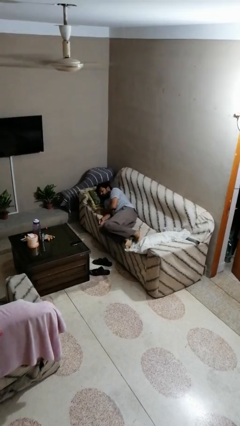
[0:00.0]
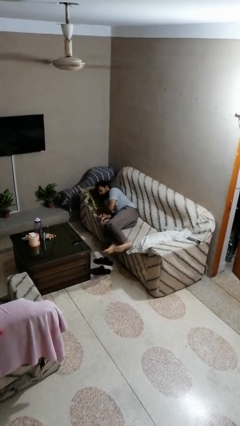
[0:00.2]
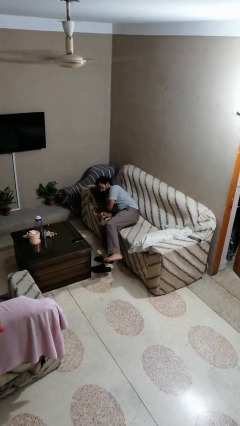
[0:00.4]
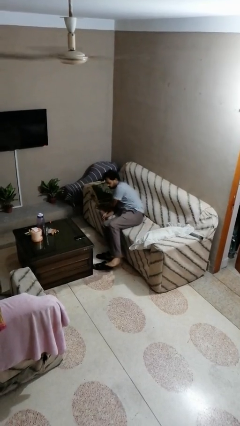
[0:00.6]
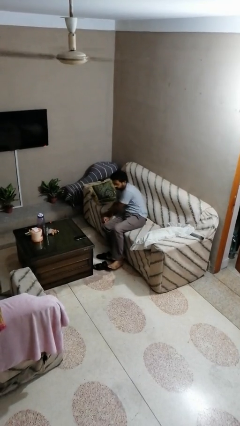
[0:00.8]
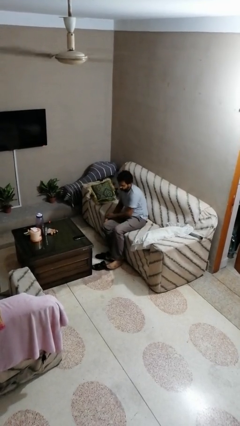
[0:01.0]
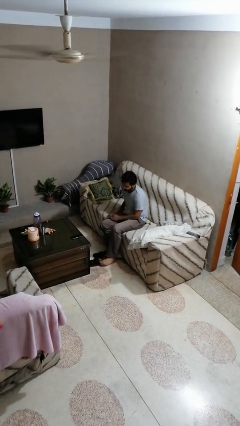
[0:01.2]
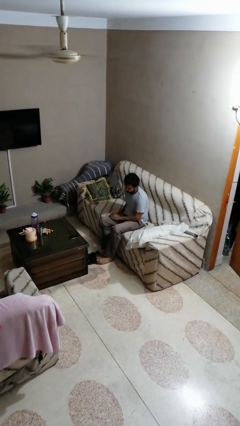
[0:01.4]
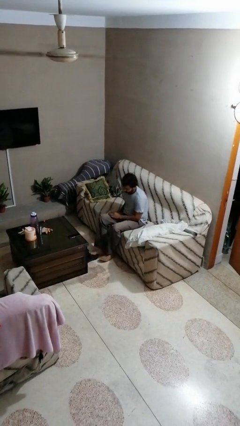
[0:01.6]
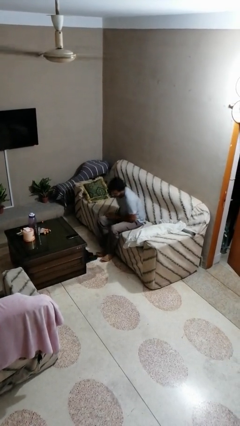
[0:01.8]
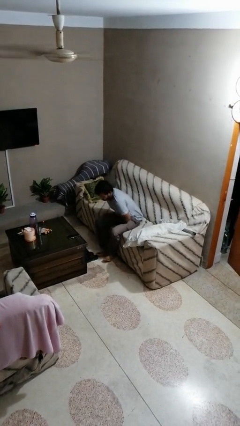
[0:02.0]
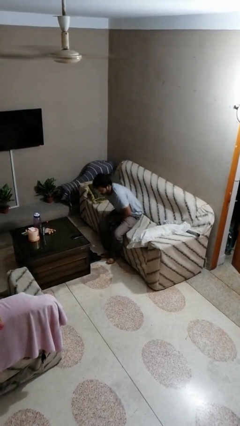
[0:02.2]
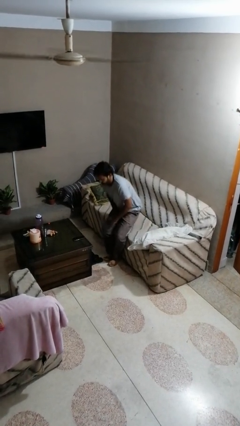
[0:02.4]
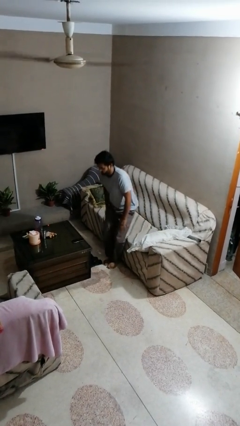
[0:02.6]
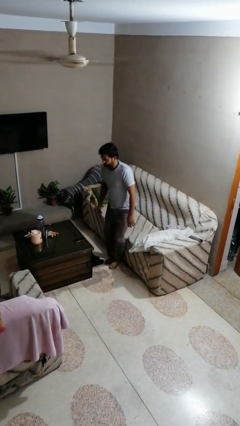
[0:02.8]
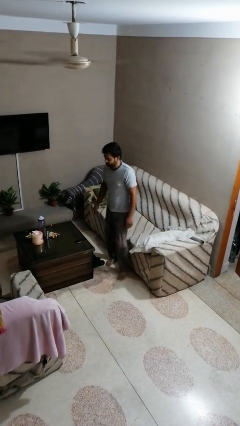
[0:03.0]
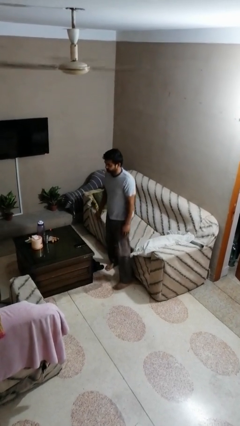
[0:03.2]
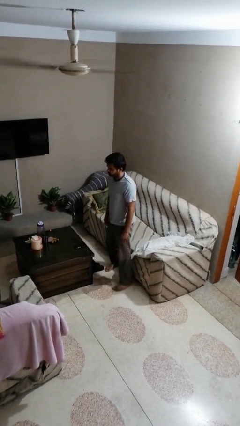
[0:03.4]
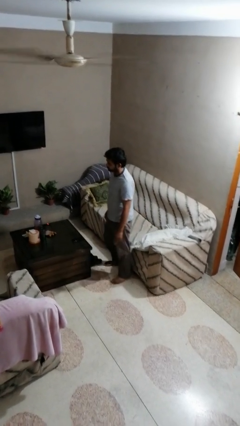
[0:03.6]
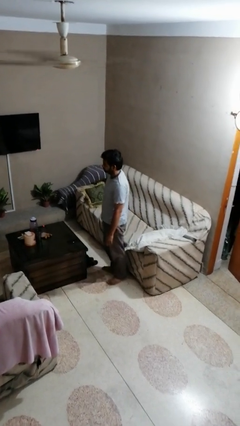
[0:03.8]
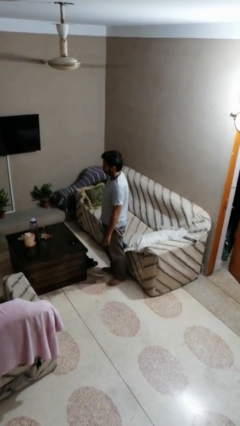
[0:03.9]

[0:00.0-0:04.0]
person stands up

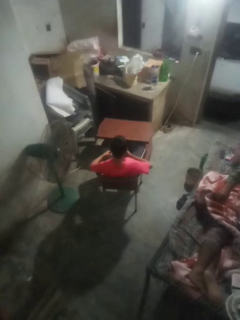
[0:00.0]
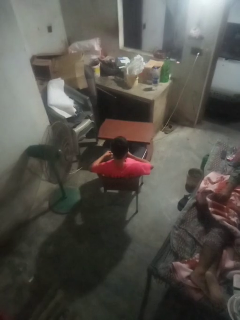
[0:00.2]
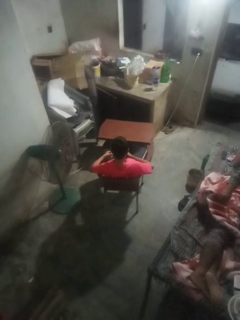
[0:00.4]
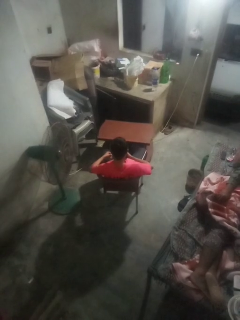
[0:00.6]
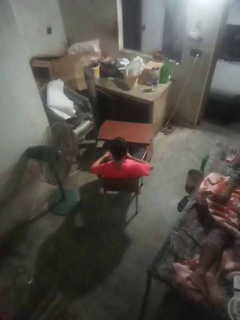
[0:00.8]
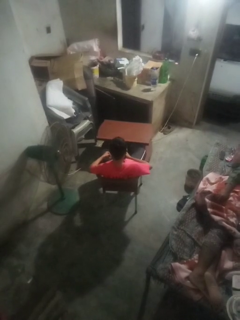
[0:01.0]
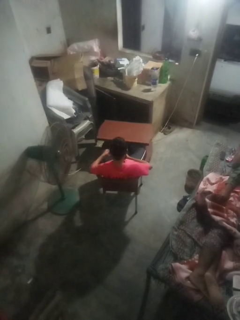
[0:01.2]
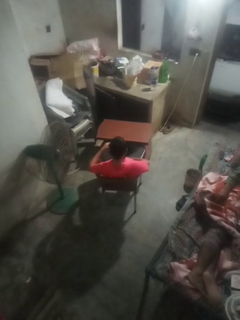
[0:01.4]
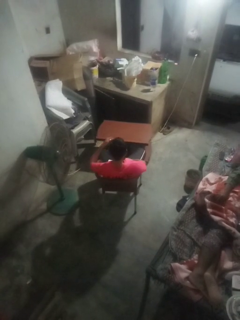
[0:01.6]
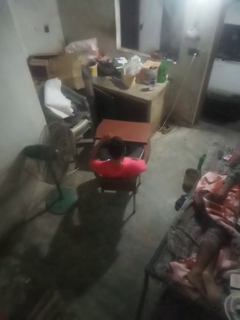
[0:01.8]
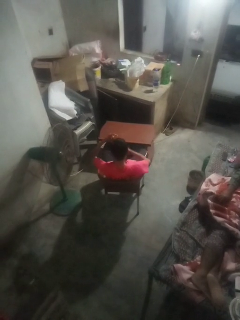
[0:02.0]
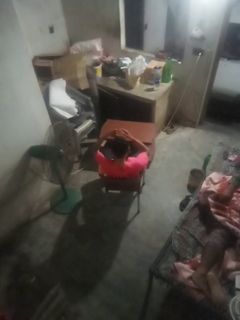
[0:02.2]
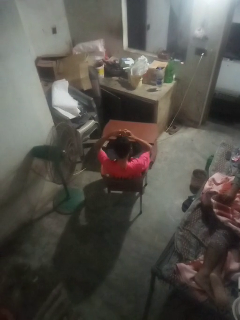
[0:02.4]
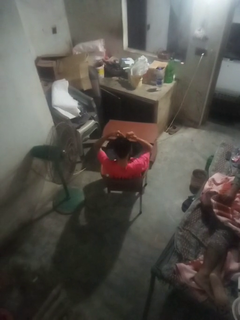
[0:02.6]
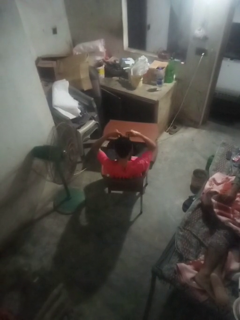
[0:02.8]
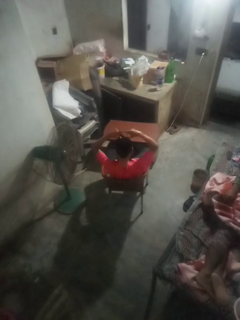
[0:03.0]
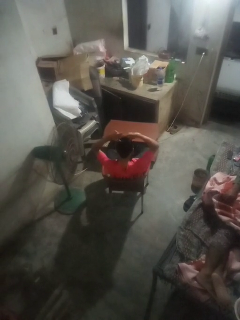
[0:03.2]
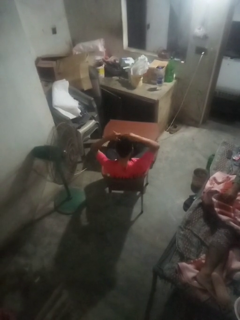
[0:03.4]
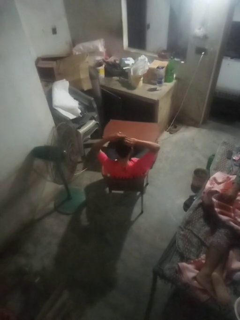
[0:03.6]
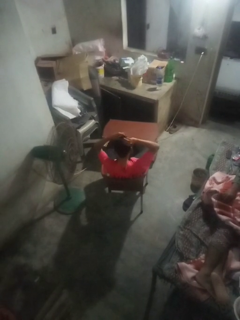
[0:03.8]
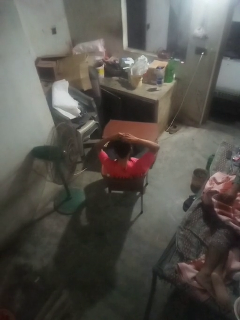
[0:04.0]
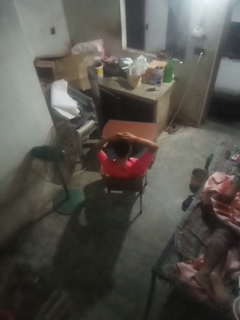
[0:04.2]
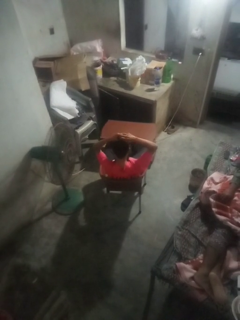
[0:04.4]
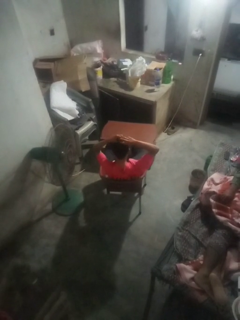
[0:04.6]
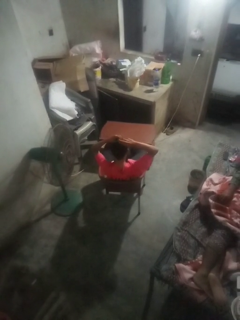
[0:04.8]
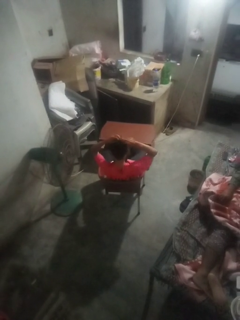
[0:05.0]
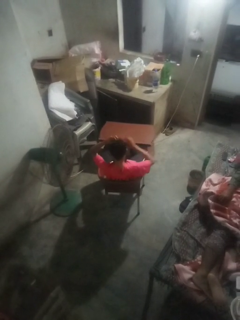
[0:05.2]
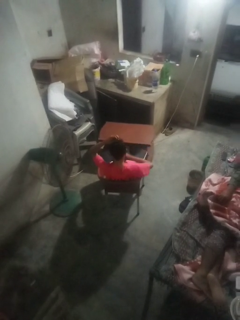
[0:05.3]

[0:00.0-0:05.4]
person puts hair in ponytail

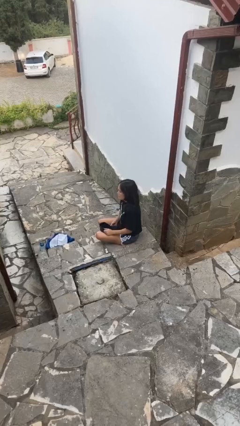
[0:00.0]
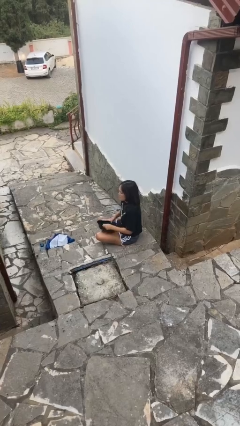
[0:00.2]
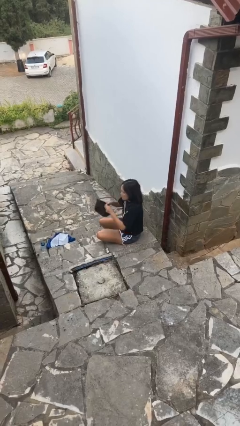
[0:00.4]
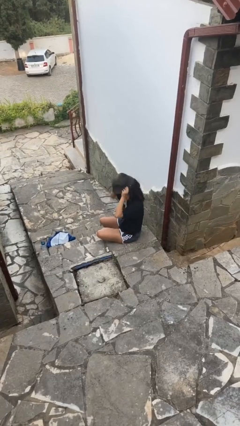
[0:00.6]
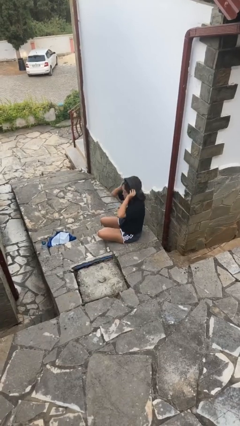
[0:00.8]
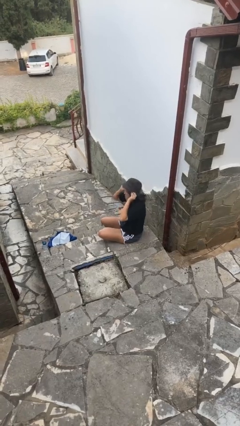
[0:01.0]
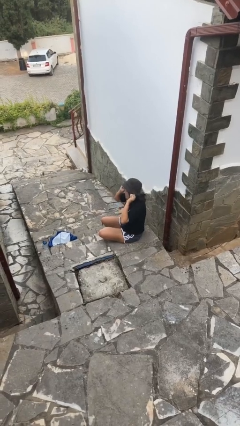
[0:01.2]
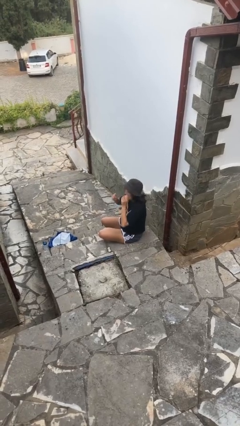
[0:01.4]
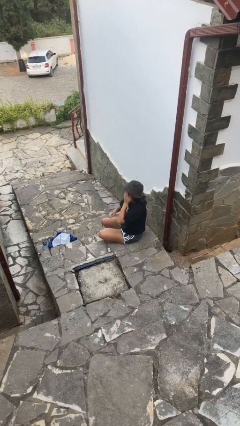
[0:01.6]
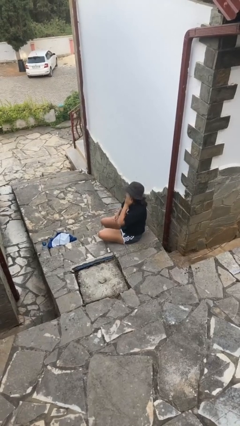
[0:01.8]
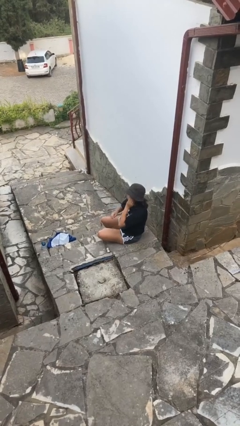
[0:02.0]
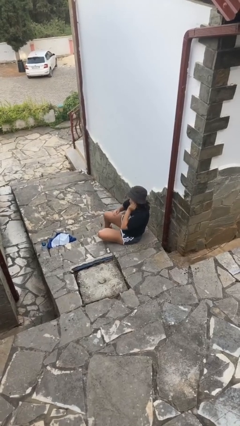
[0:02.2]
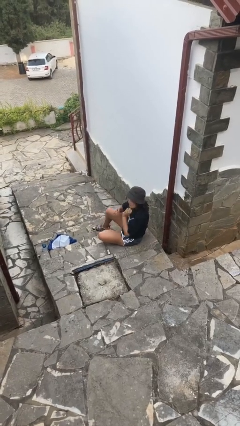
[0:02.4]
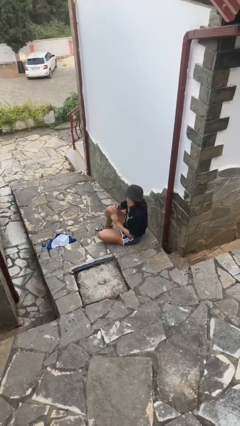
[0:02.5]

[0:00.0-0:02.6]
person puts on hat

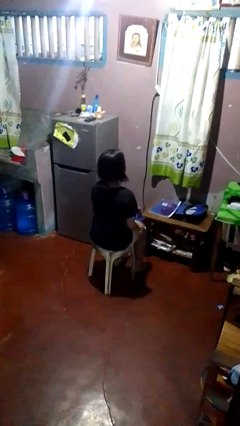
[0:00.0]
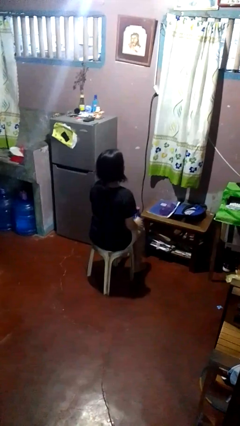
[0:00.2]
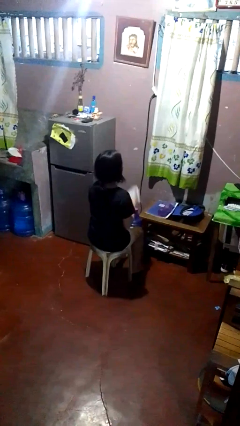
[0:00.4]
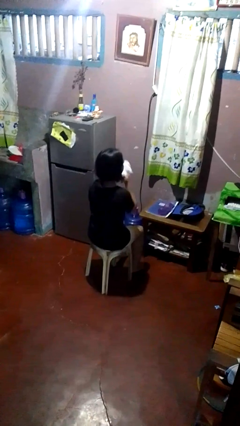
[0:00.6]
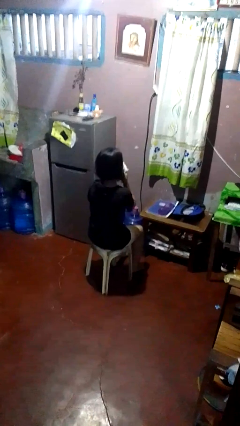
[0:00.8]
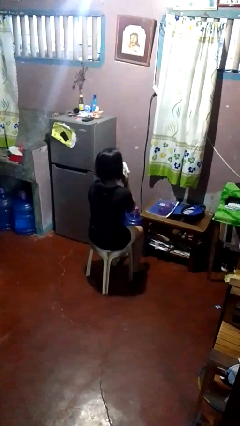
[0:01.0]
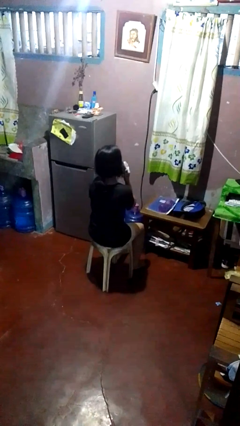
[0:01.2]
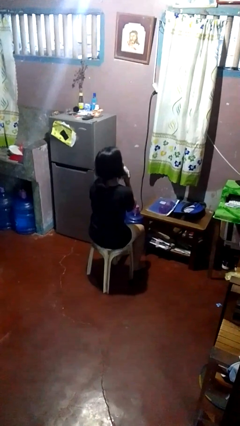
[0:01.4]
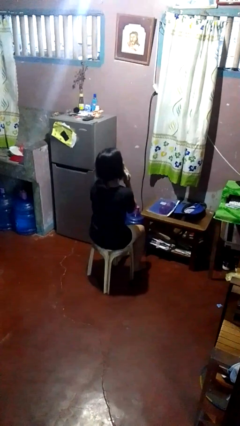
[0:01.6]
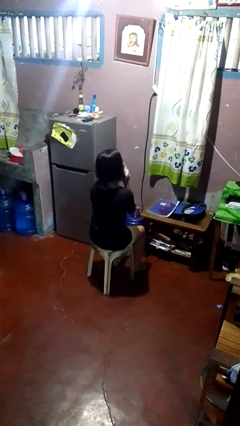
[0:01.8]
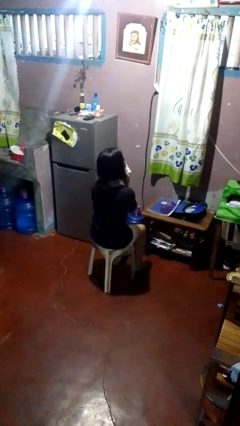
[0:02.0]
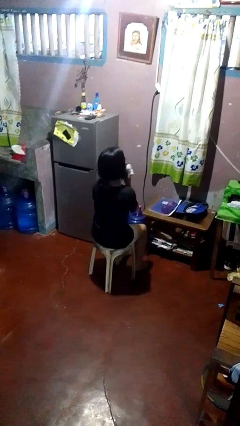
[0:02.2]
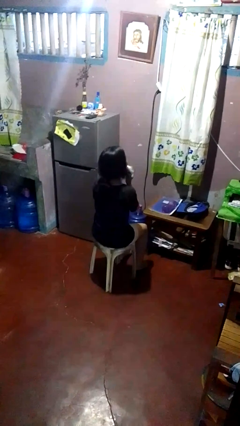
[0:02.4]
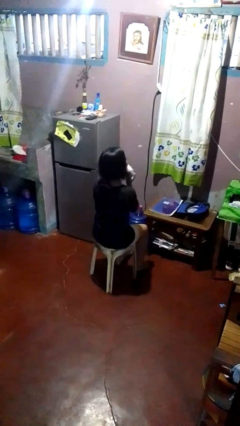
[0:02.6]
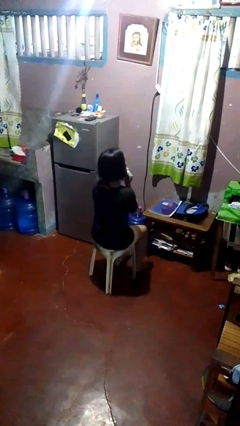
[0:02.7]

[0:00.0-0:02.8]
person wipes mouth with napkin

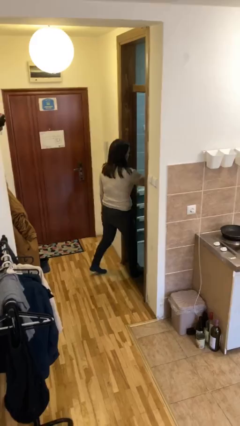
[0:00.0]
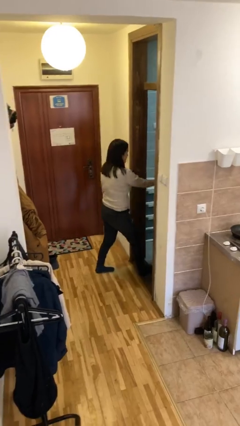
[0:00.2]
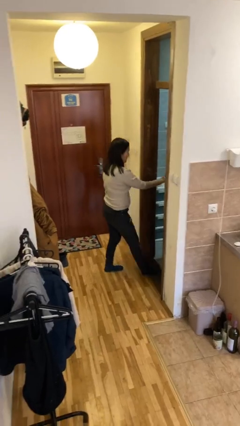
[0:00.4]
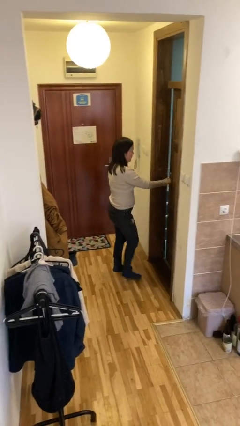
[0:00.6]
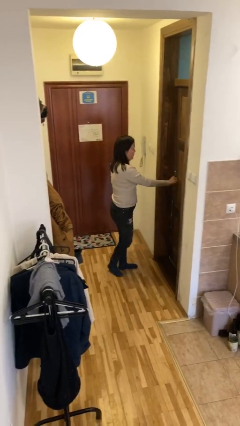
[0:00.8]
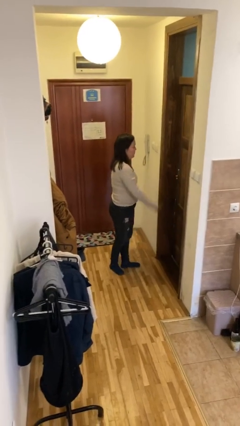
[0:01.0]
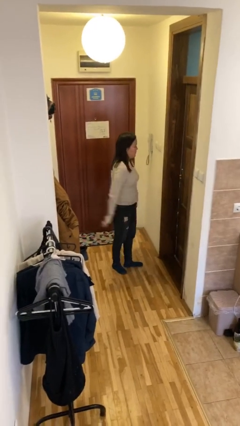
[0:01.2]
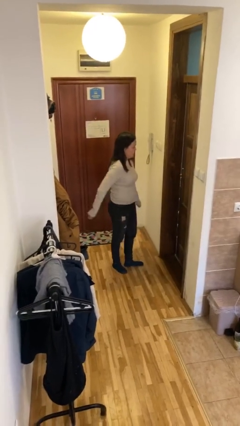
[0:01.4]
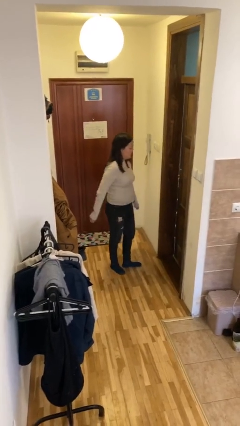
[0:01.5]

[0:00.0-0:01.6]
person closes facility door

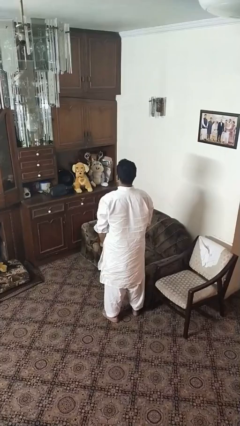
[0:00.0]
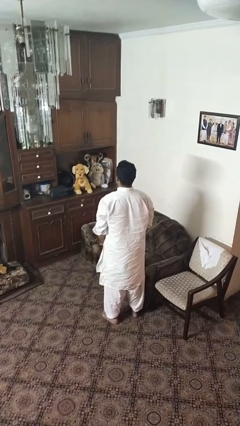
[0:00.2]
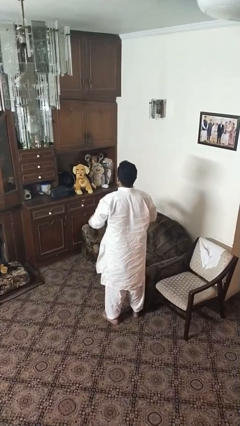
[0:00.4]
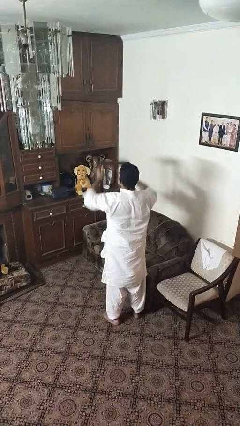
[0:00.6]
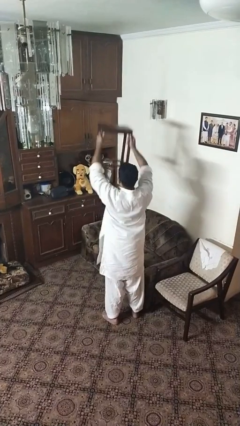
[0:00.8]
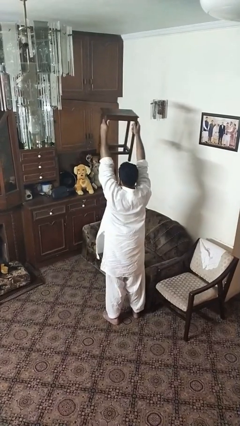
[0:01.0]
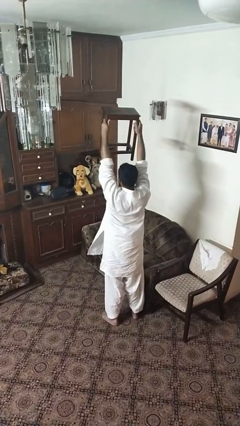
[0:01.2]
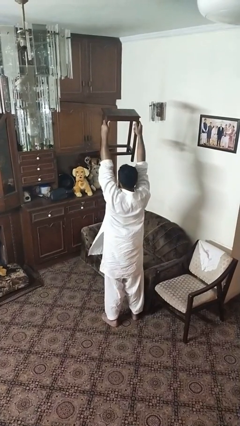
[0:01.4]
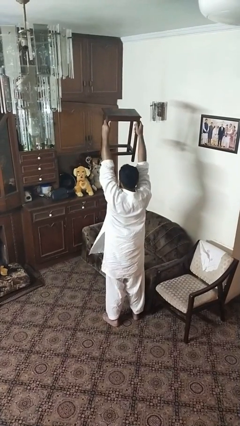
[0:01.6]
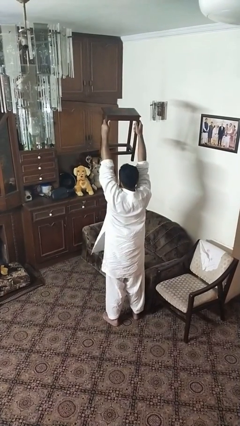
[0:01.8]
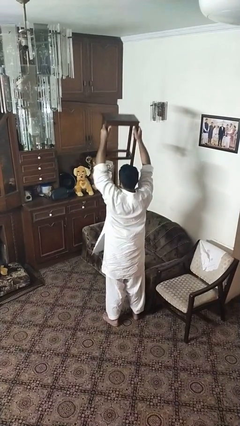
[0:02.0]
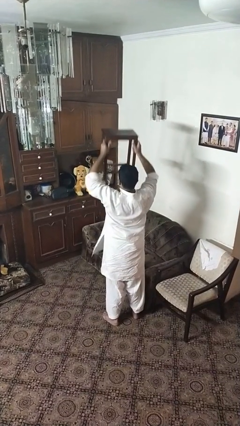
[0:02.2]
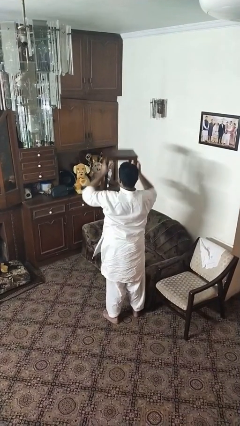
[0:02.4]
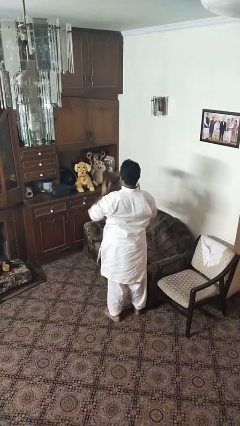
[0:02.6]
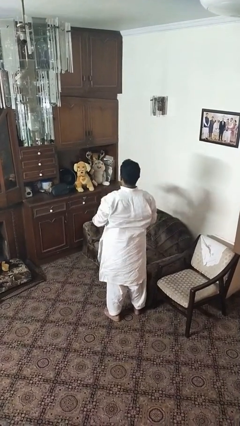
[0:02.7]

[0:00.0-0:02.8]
person holds object above head
